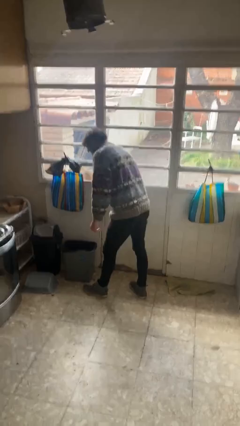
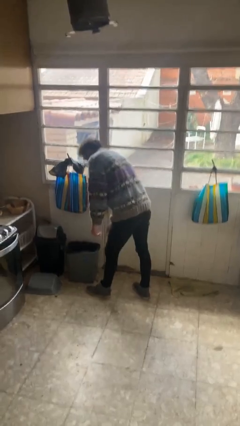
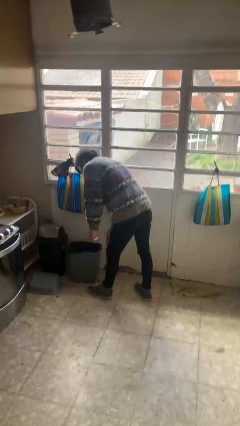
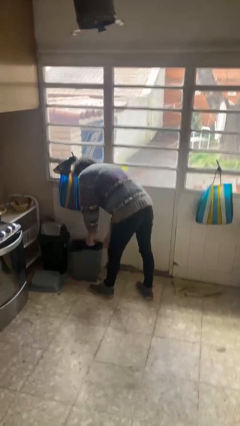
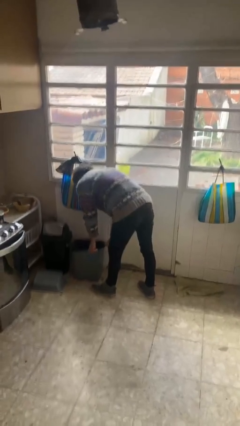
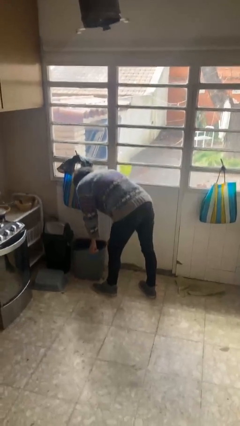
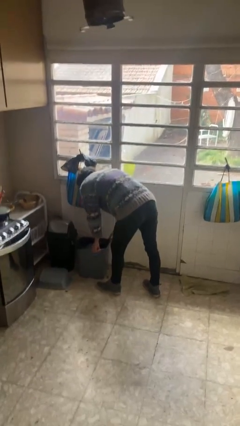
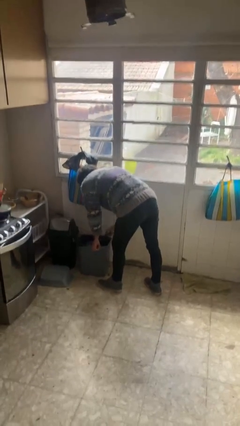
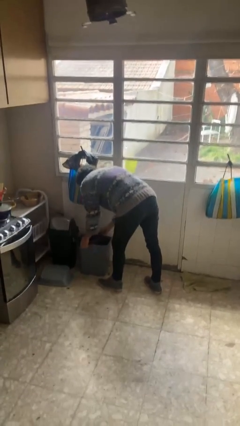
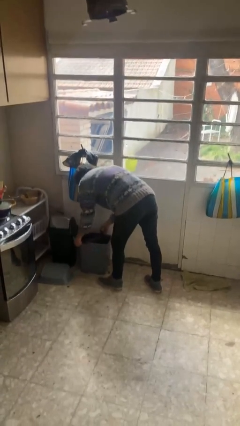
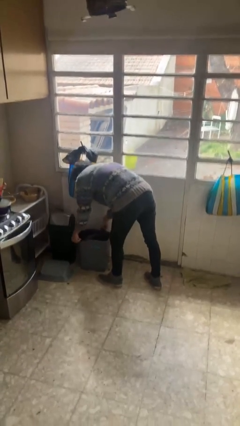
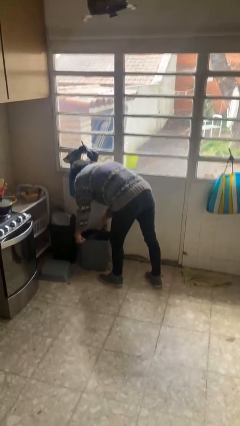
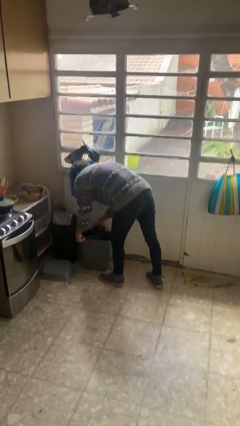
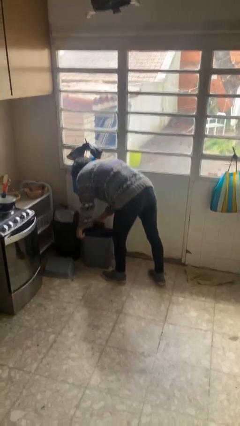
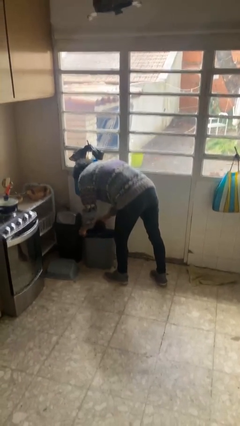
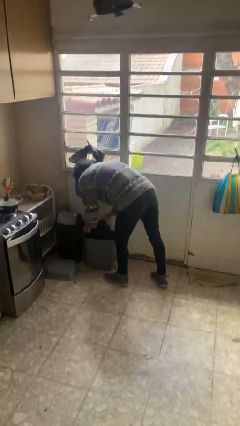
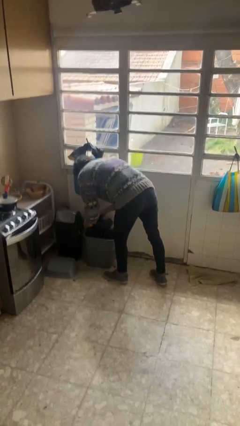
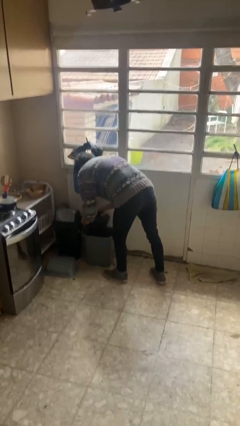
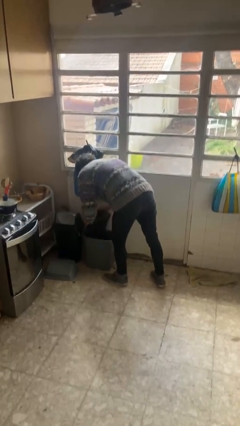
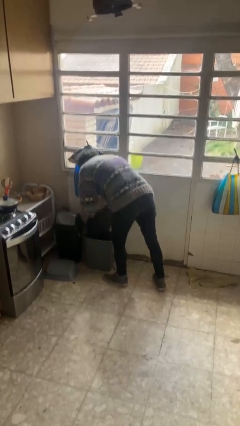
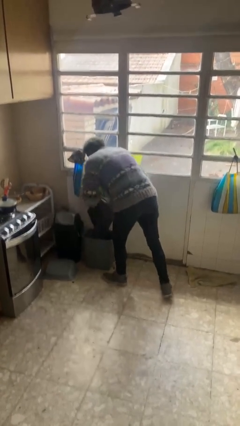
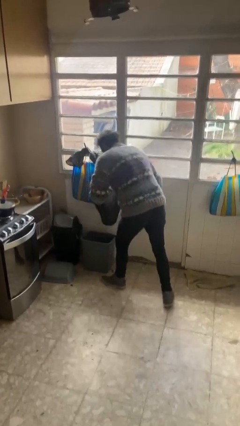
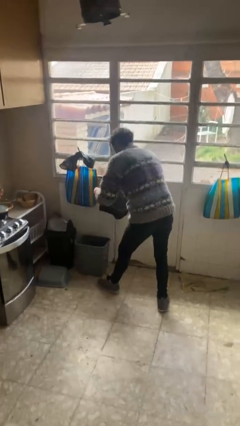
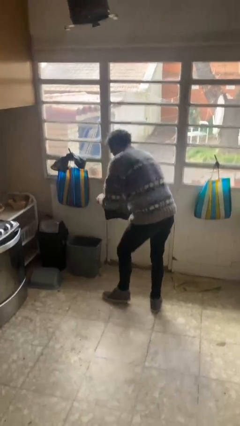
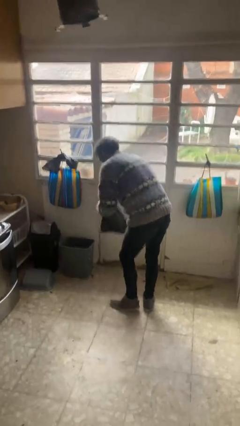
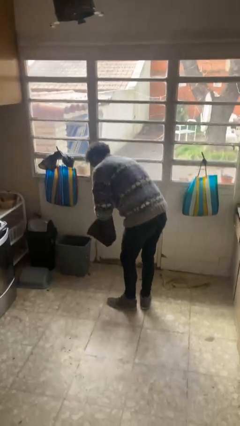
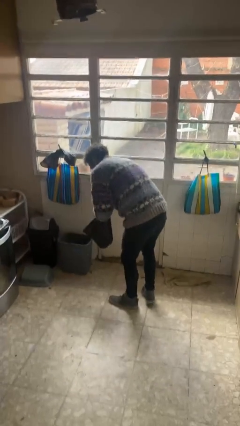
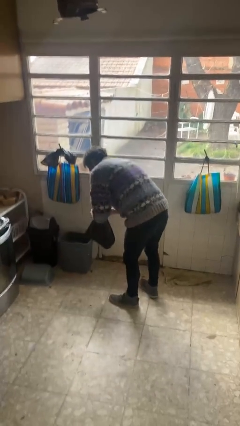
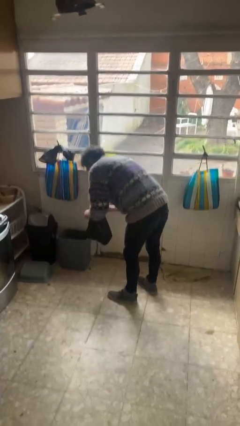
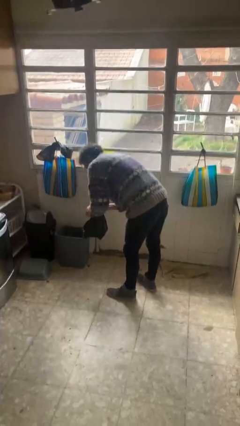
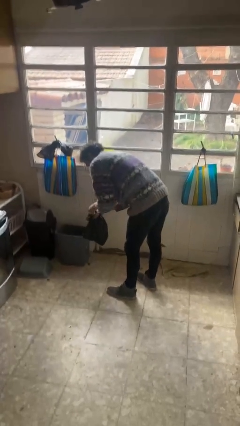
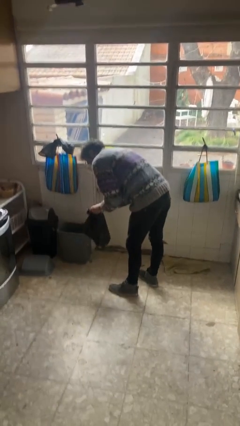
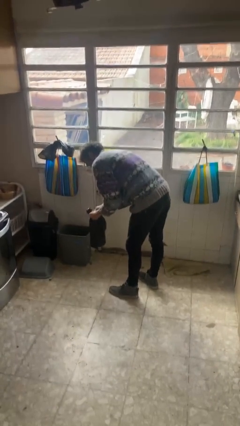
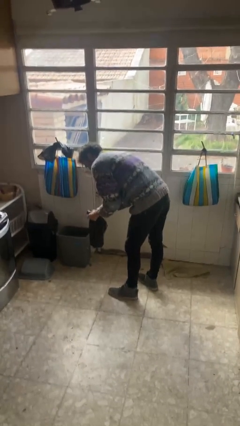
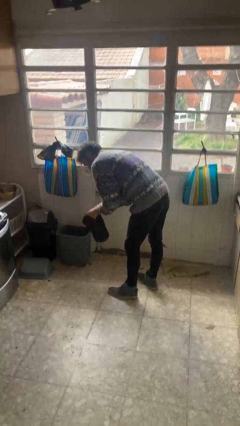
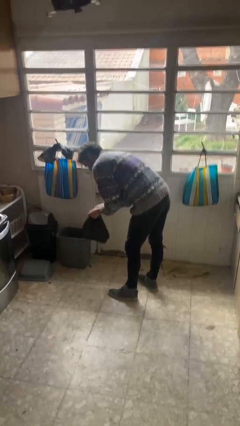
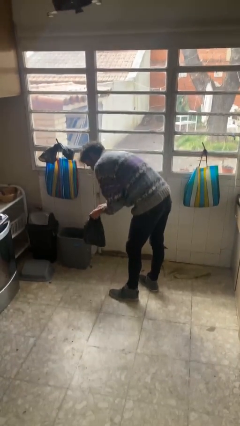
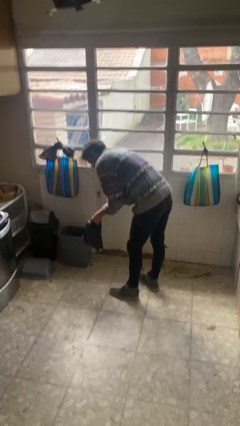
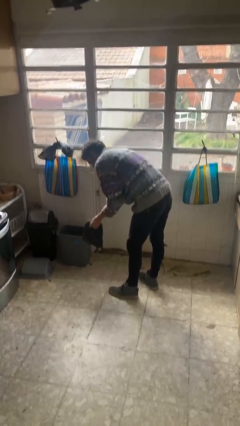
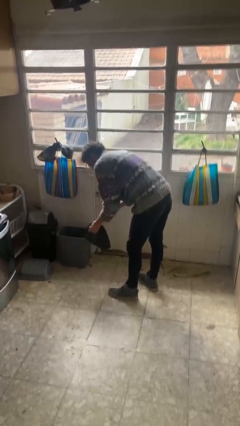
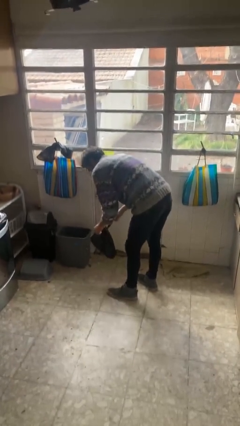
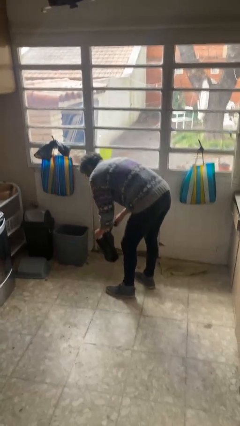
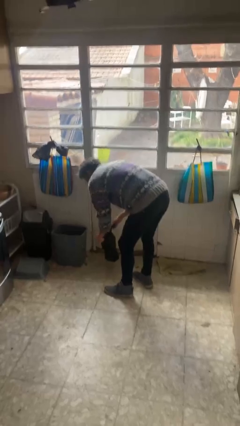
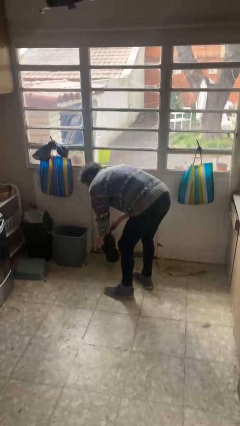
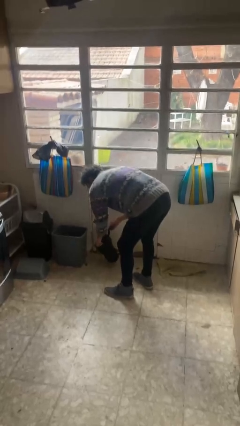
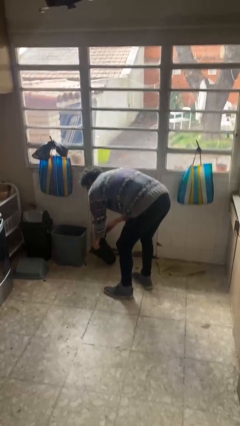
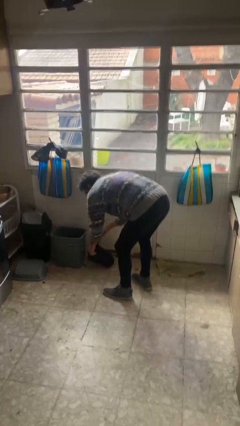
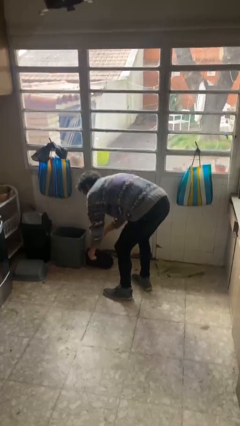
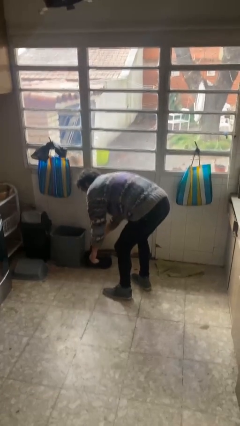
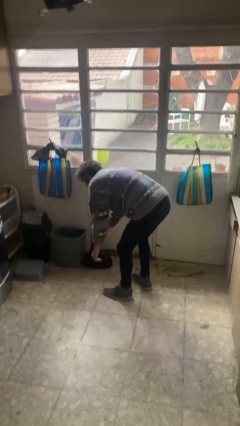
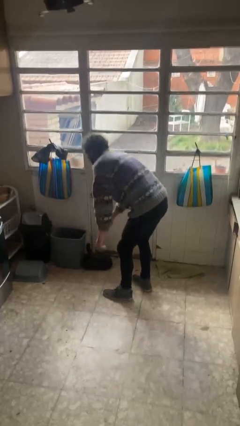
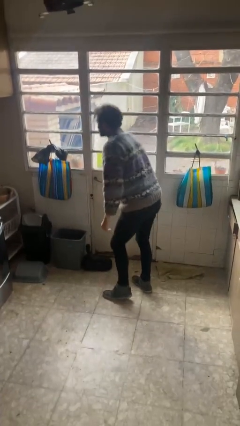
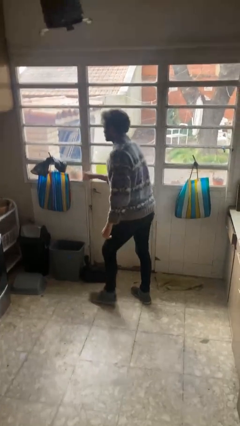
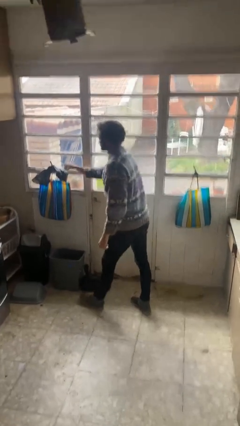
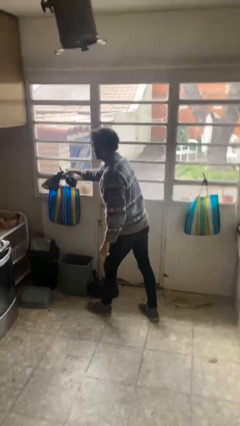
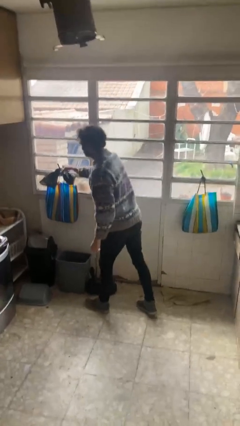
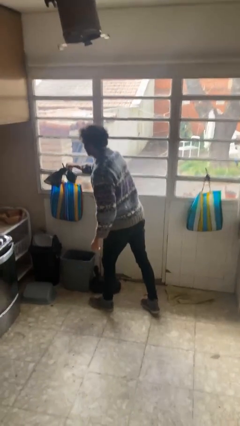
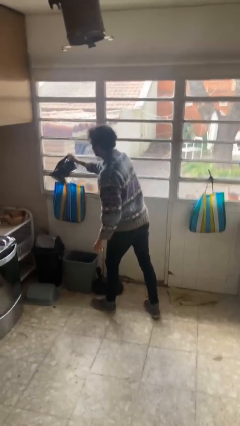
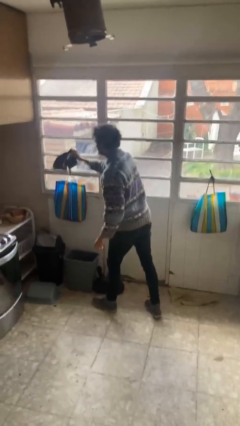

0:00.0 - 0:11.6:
person removes trashbag from trashcan

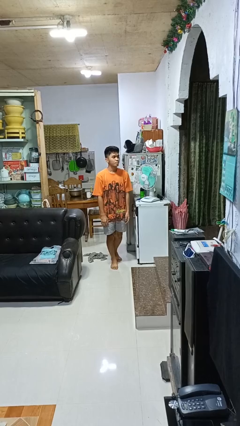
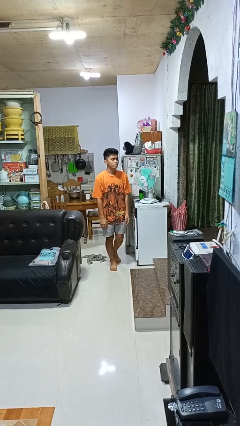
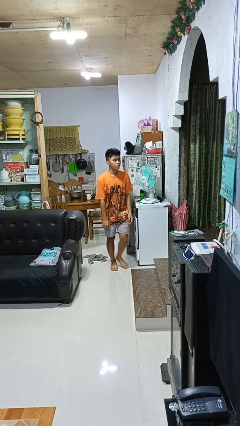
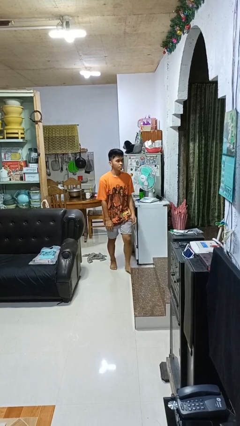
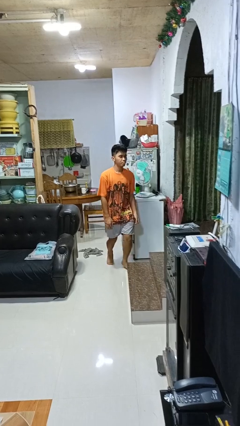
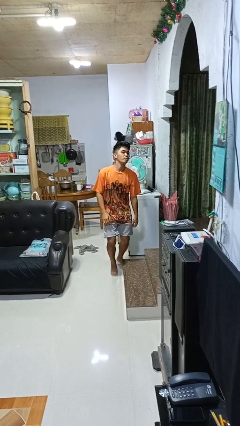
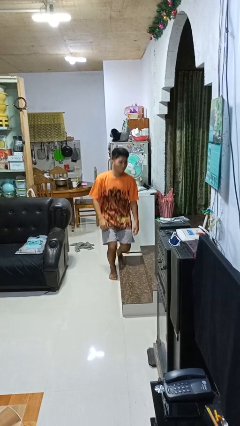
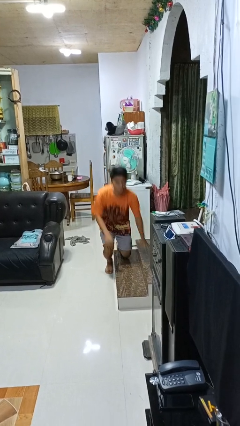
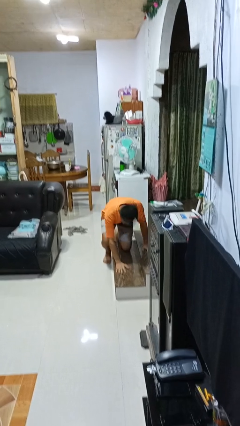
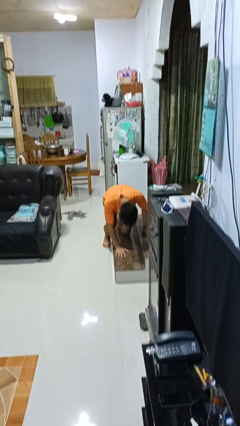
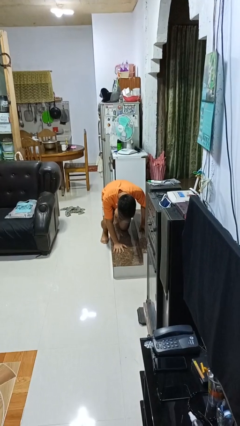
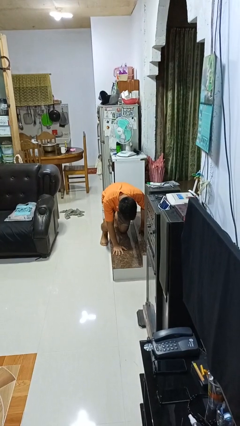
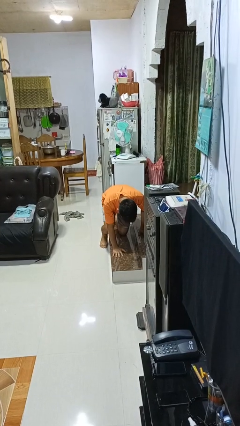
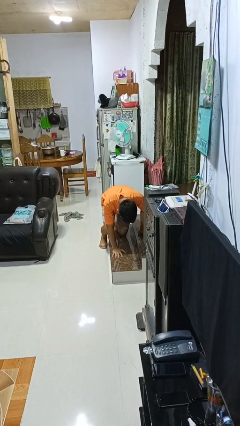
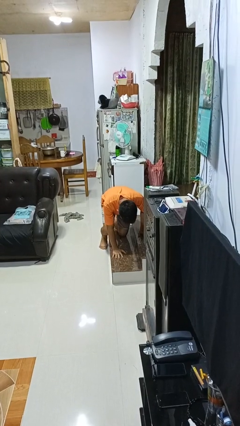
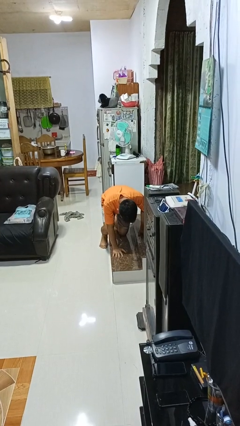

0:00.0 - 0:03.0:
person trips on object on floor

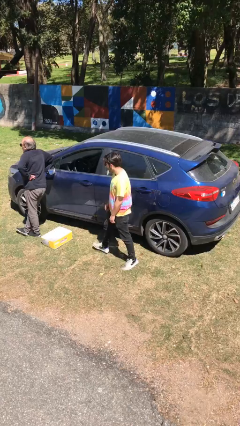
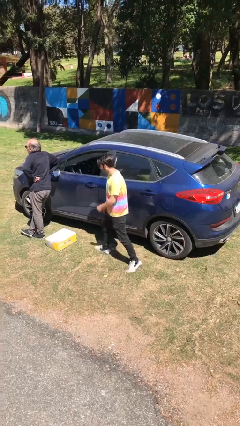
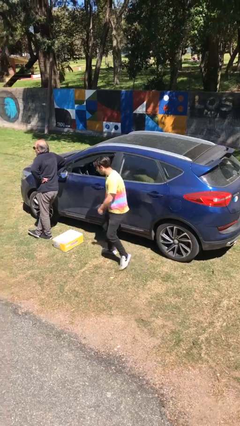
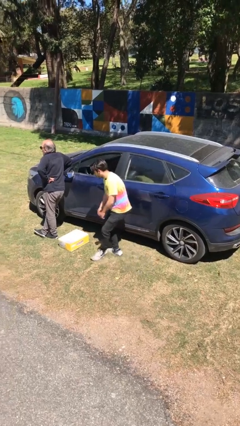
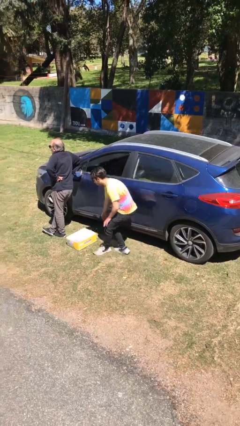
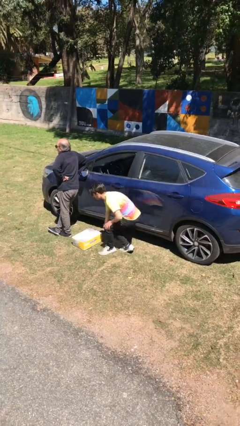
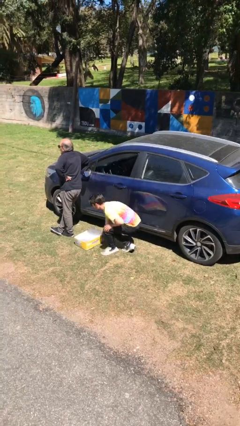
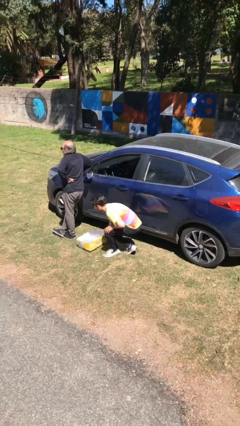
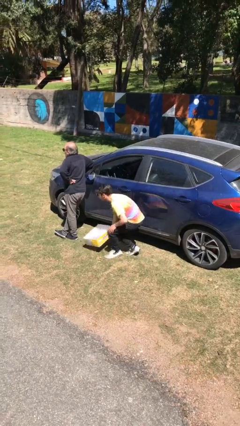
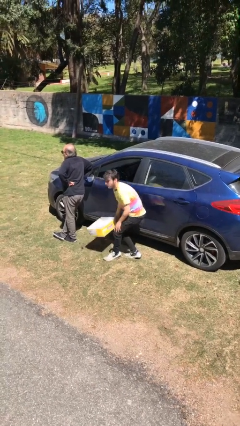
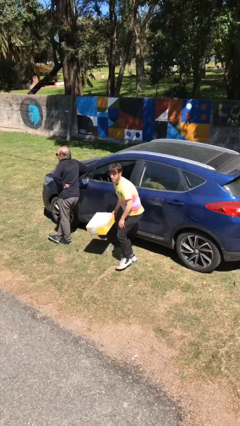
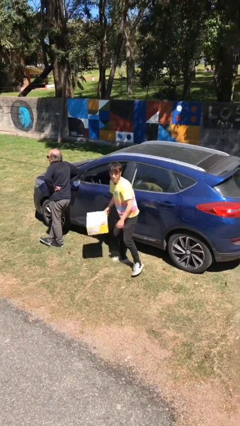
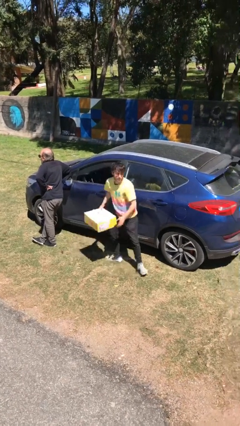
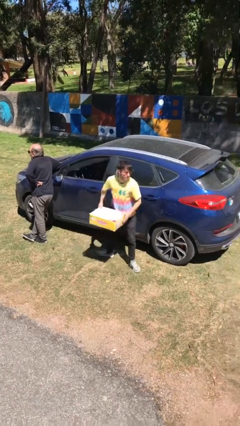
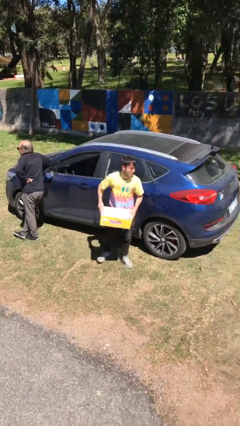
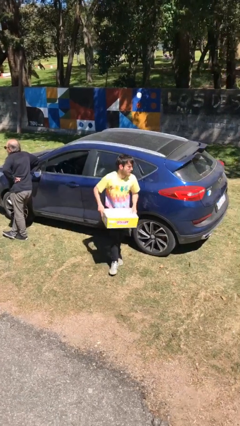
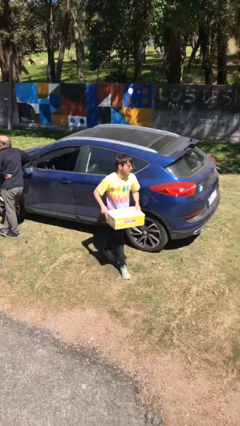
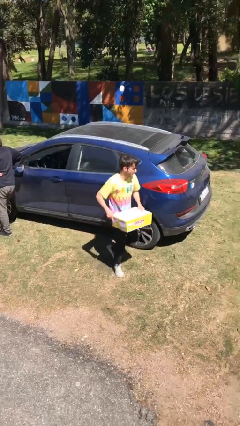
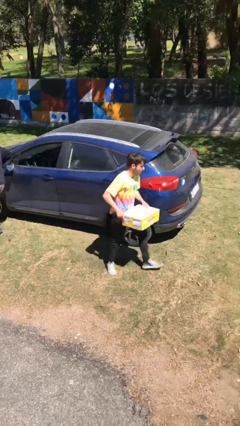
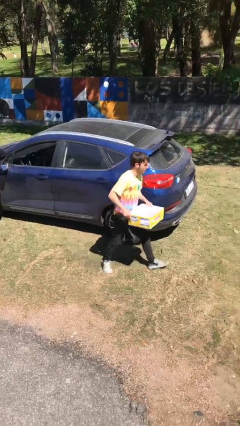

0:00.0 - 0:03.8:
person steals object from person
